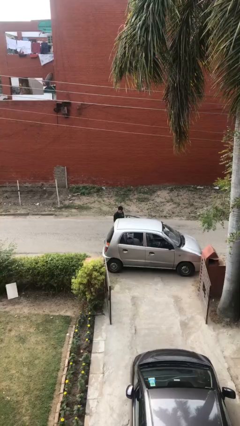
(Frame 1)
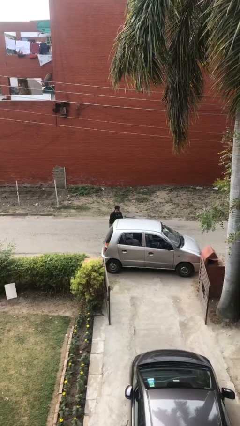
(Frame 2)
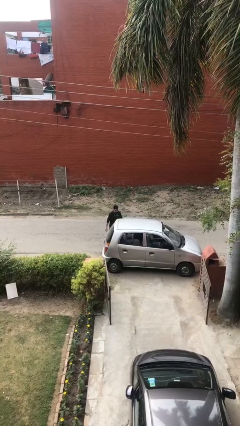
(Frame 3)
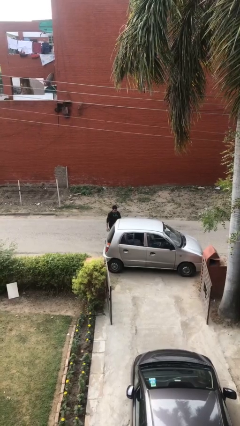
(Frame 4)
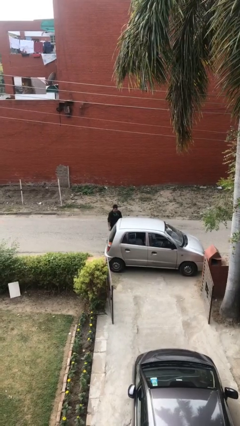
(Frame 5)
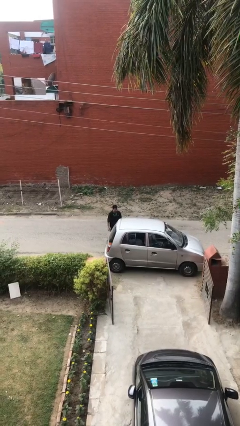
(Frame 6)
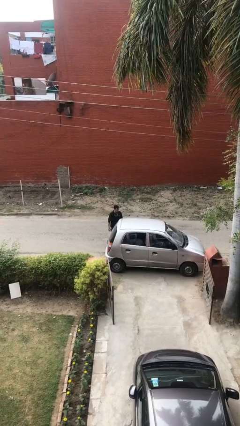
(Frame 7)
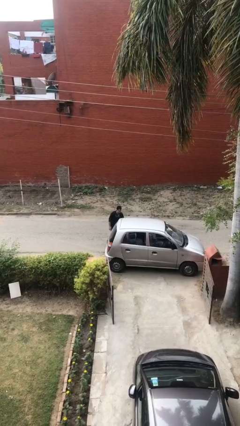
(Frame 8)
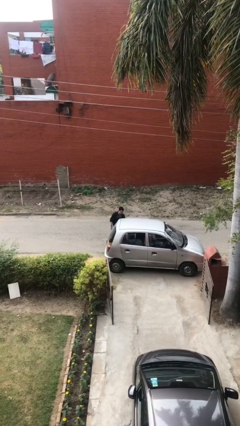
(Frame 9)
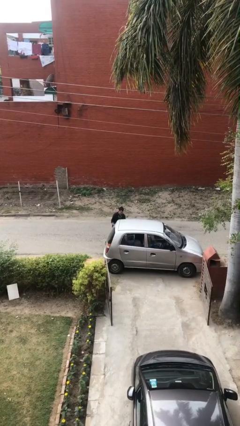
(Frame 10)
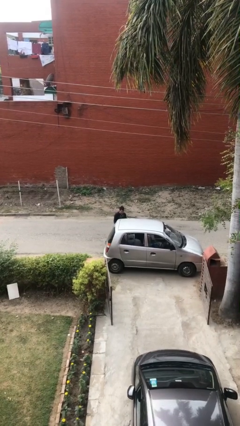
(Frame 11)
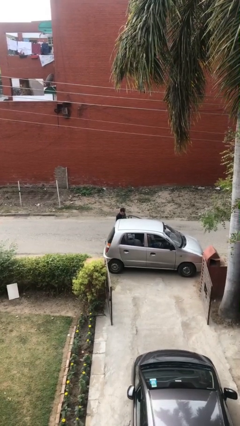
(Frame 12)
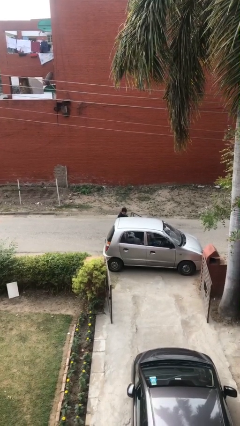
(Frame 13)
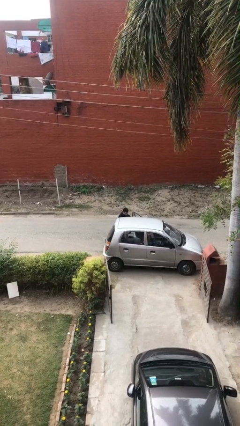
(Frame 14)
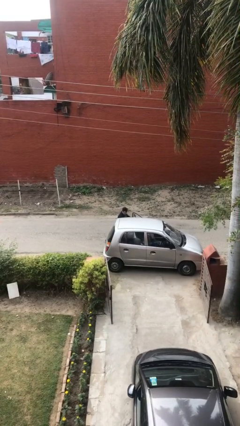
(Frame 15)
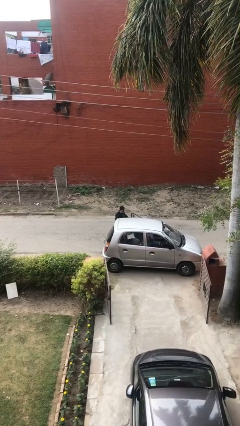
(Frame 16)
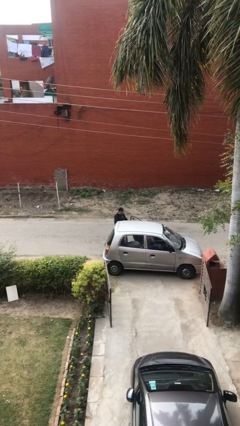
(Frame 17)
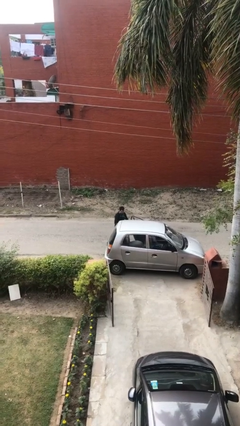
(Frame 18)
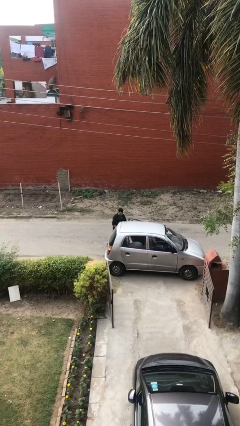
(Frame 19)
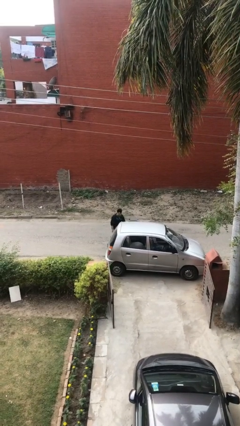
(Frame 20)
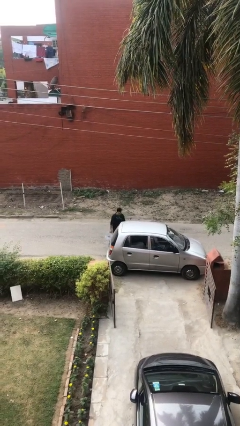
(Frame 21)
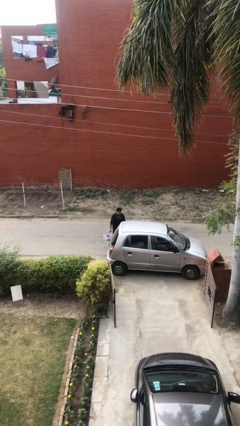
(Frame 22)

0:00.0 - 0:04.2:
person unloads car

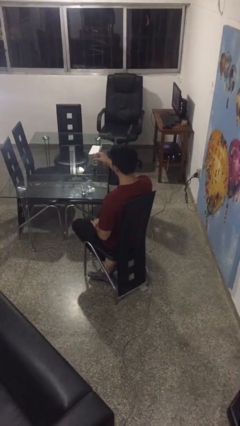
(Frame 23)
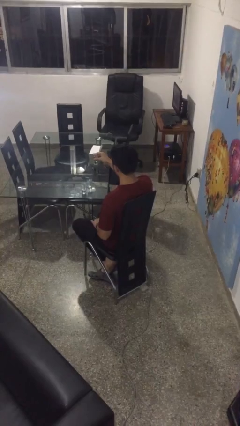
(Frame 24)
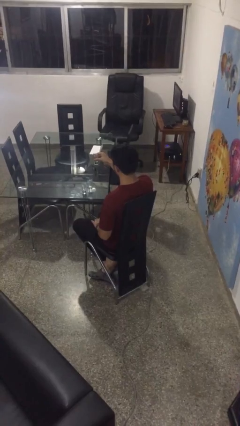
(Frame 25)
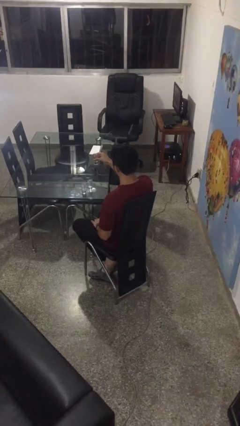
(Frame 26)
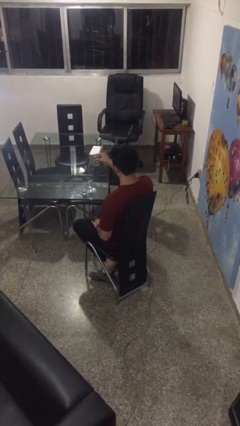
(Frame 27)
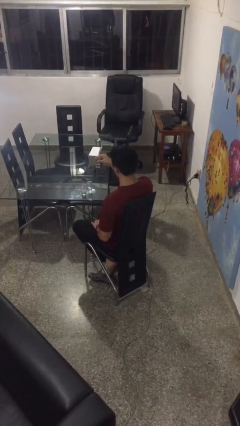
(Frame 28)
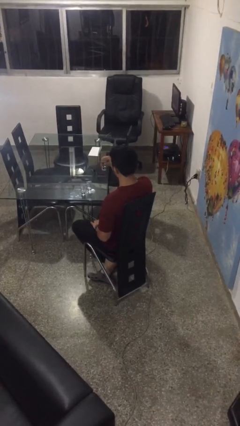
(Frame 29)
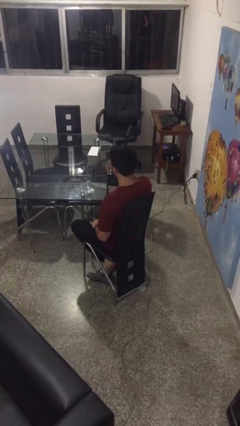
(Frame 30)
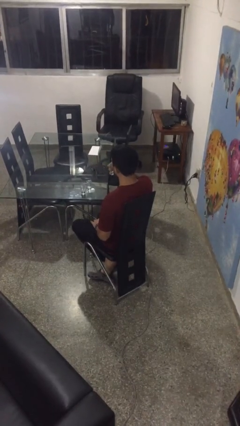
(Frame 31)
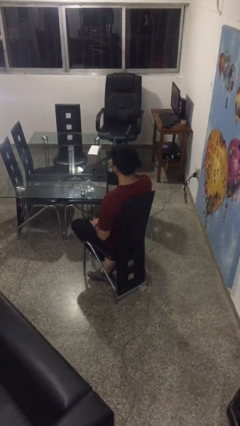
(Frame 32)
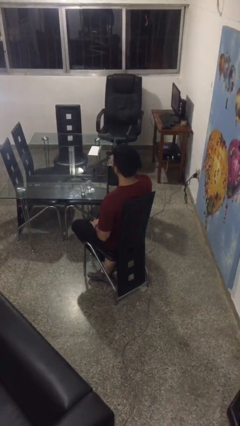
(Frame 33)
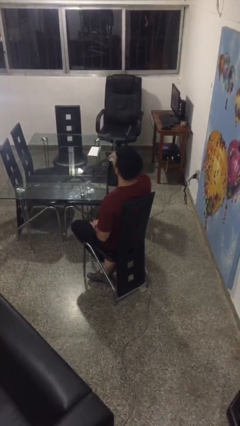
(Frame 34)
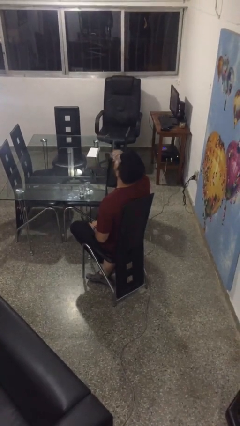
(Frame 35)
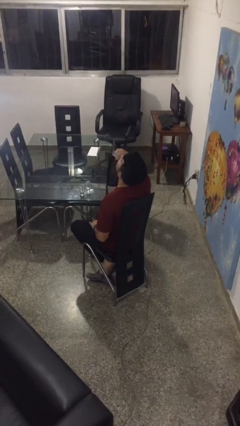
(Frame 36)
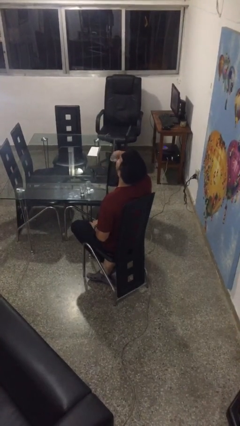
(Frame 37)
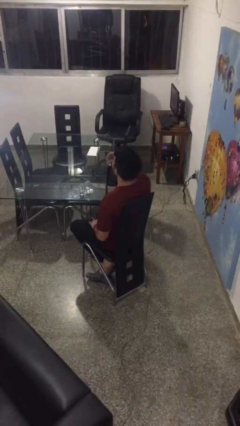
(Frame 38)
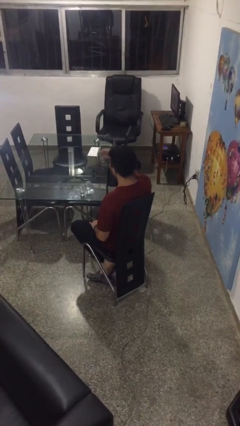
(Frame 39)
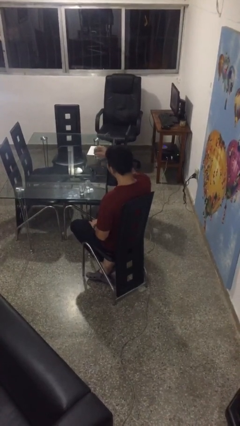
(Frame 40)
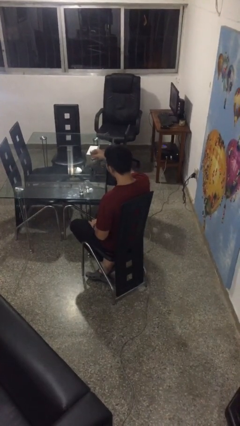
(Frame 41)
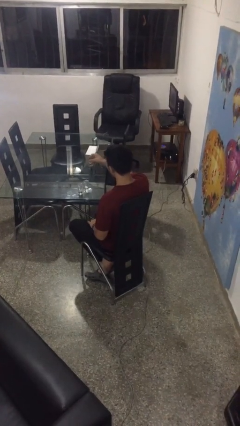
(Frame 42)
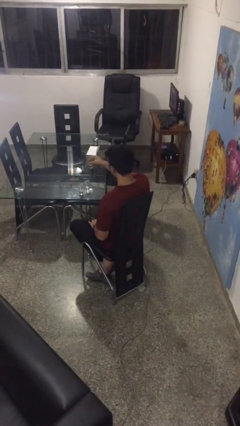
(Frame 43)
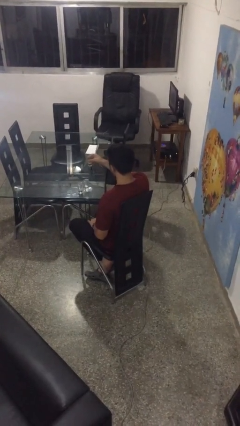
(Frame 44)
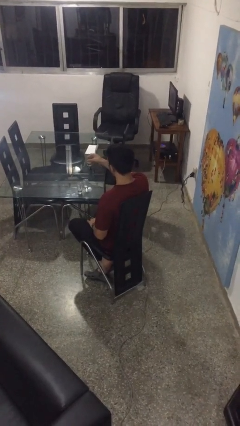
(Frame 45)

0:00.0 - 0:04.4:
person drinks from shotglass

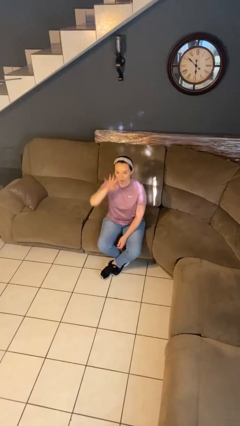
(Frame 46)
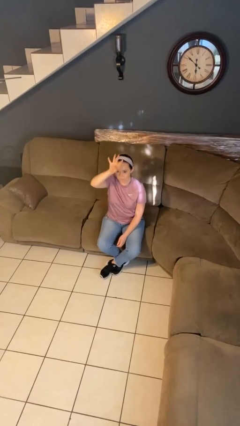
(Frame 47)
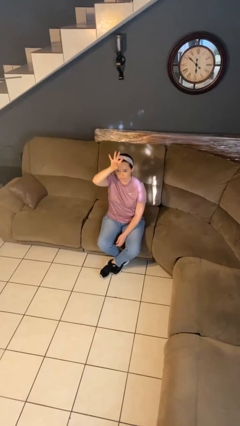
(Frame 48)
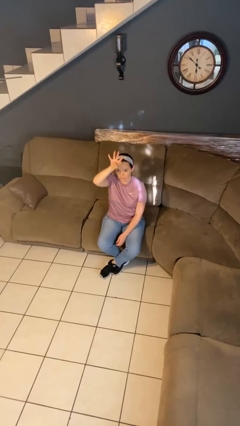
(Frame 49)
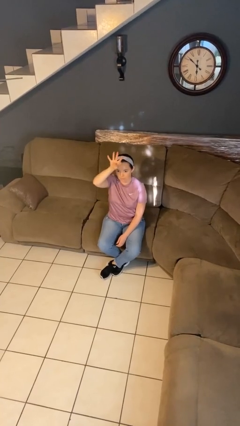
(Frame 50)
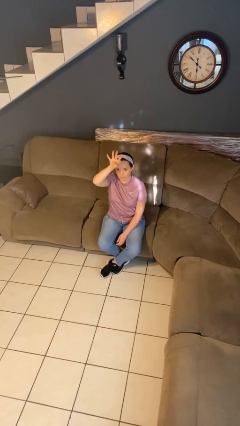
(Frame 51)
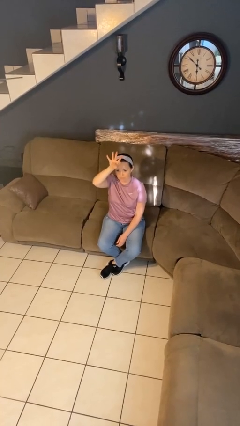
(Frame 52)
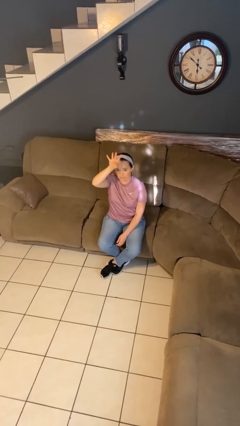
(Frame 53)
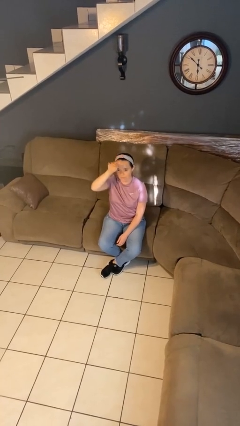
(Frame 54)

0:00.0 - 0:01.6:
person gestures number four

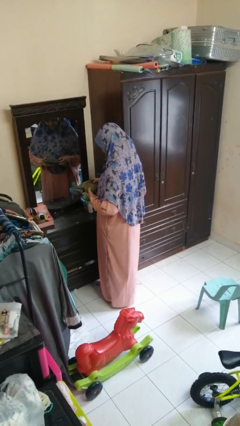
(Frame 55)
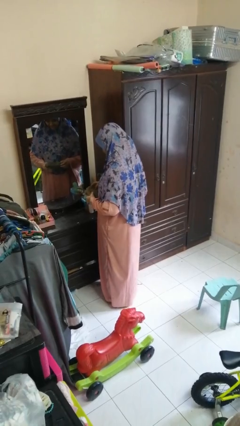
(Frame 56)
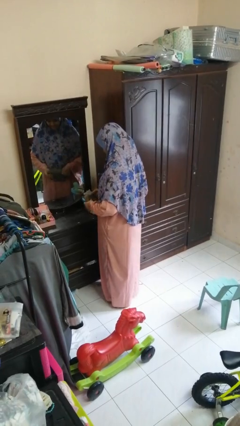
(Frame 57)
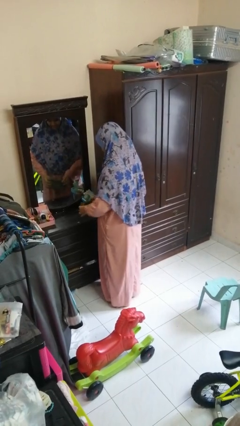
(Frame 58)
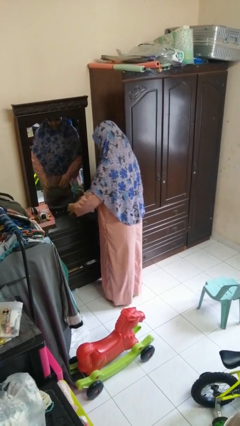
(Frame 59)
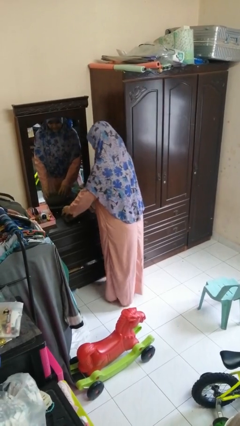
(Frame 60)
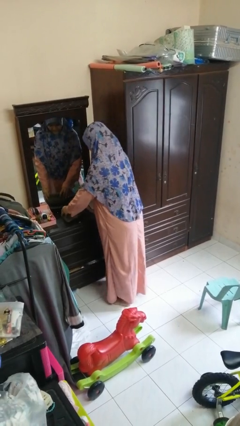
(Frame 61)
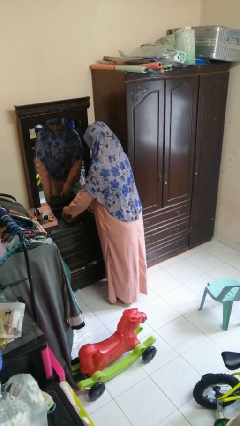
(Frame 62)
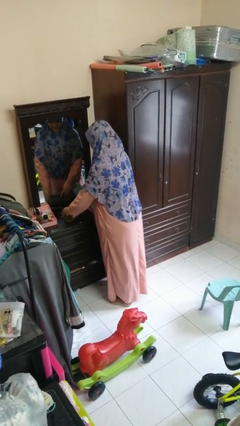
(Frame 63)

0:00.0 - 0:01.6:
person puts down object on countertop

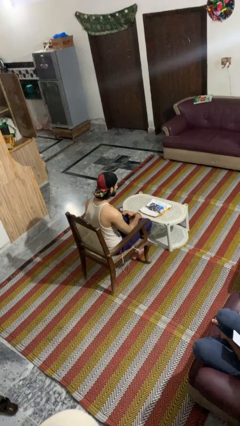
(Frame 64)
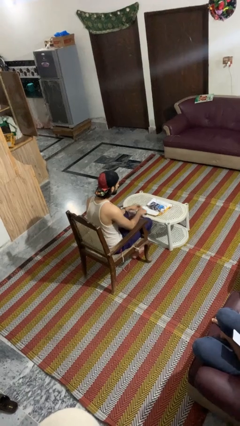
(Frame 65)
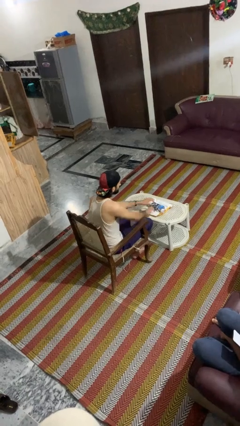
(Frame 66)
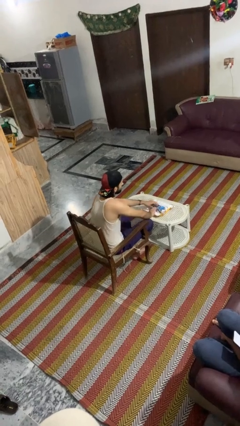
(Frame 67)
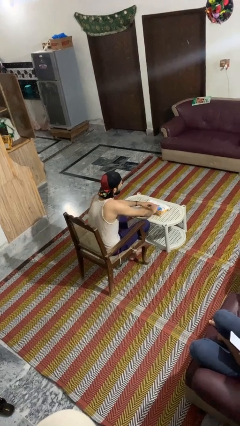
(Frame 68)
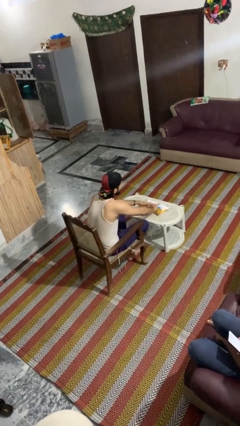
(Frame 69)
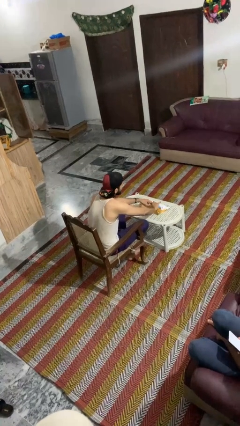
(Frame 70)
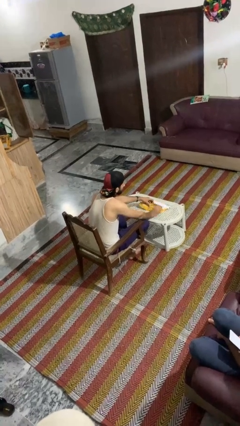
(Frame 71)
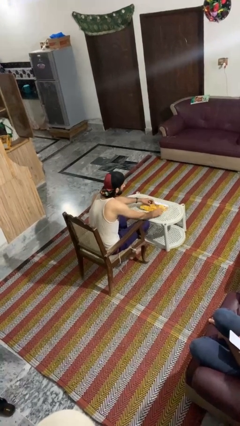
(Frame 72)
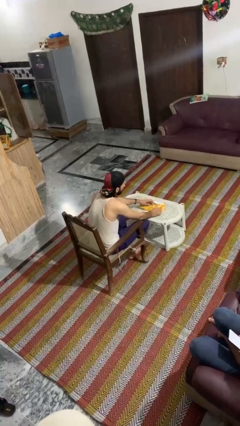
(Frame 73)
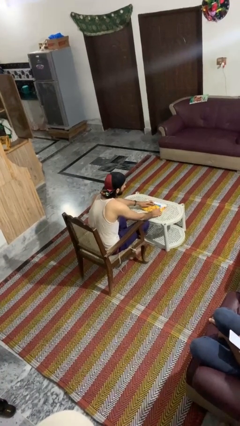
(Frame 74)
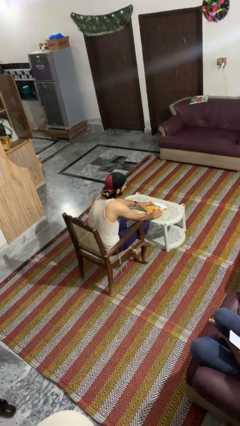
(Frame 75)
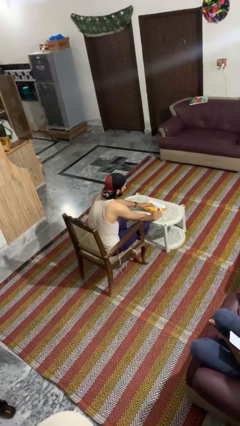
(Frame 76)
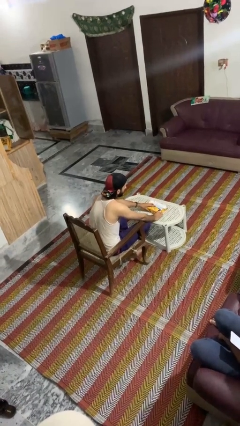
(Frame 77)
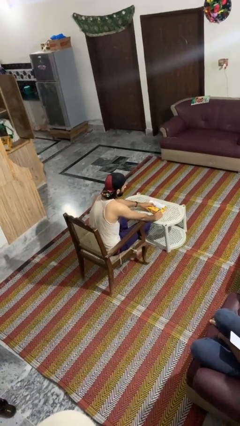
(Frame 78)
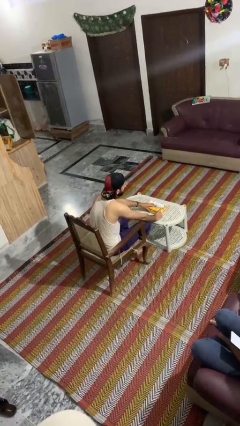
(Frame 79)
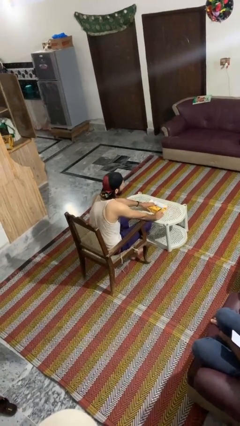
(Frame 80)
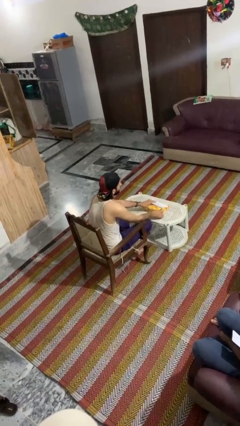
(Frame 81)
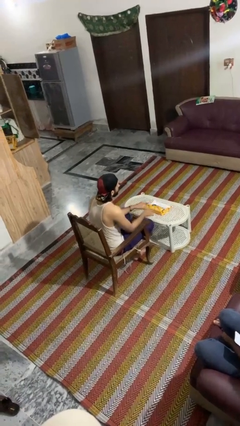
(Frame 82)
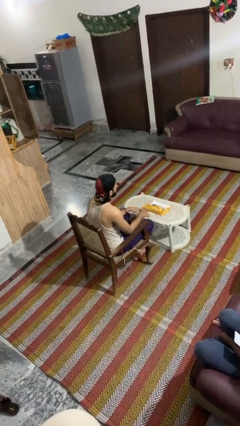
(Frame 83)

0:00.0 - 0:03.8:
person wraps box

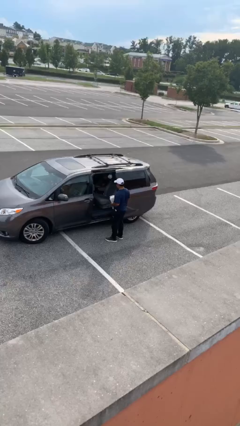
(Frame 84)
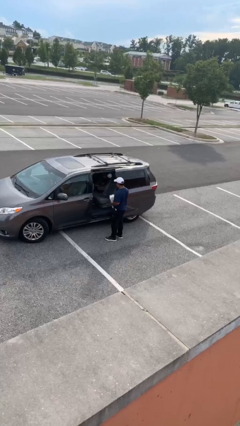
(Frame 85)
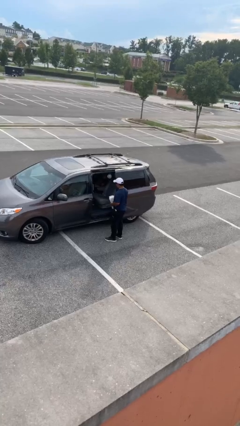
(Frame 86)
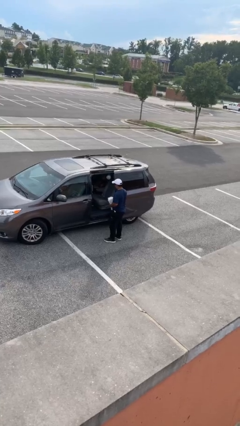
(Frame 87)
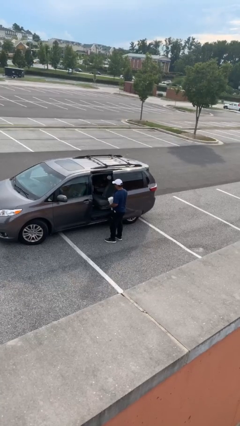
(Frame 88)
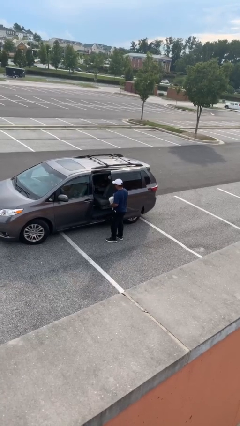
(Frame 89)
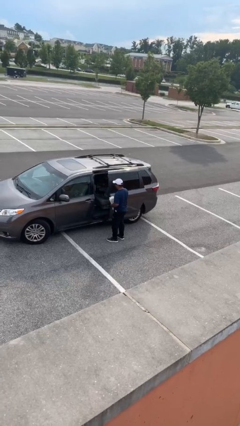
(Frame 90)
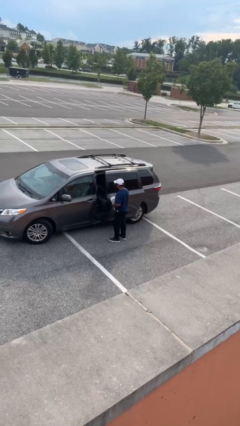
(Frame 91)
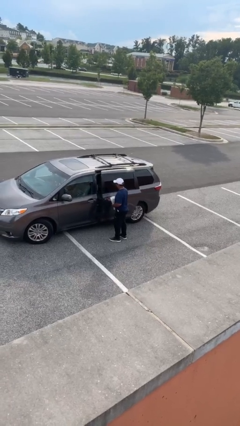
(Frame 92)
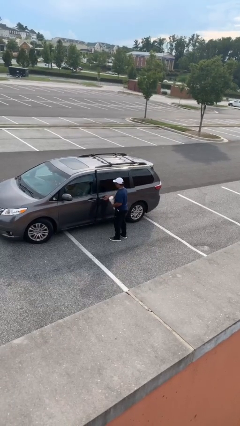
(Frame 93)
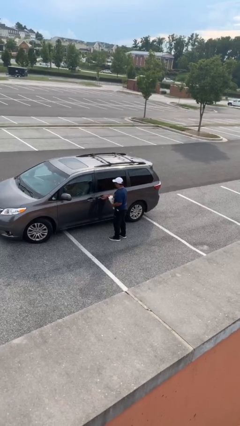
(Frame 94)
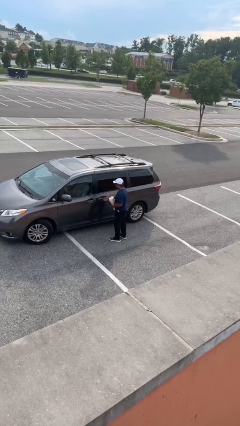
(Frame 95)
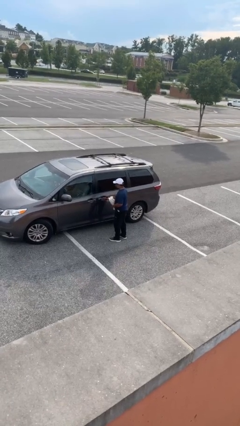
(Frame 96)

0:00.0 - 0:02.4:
person closes car door
